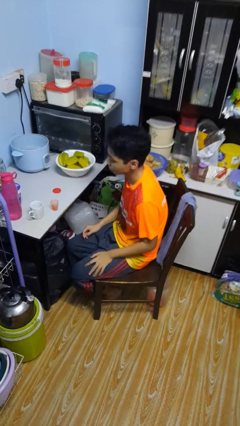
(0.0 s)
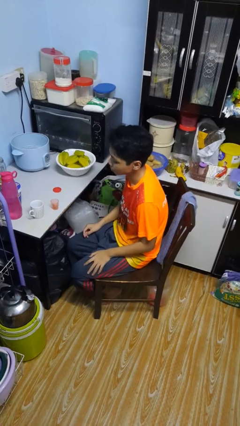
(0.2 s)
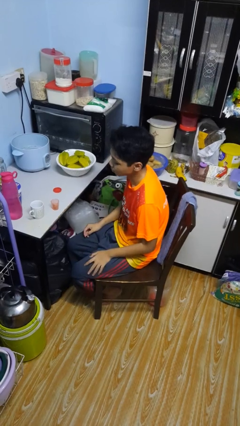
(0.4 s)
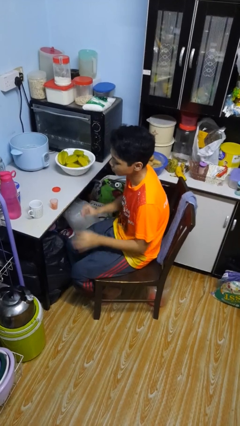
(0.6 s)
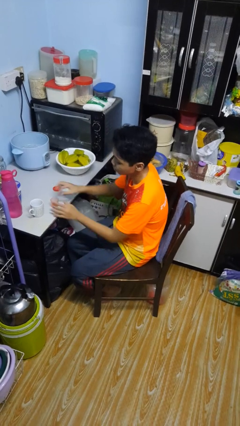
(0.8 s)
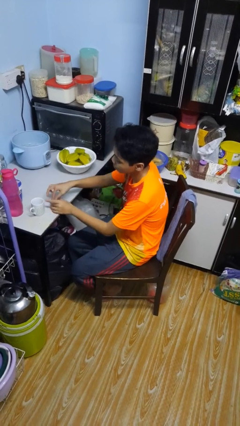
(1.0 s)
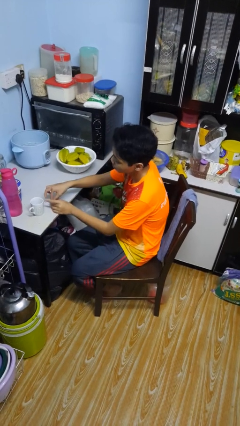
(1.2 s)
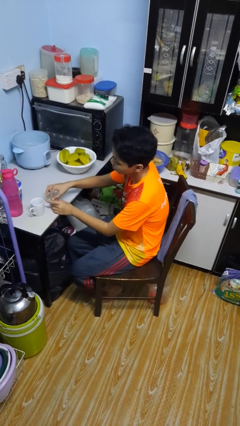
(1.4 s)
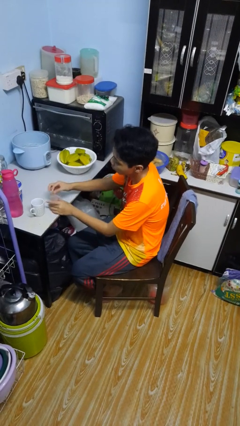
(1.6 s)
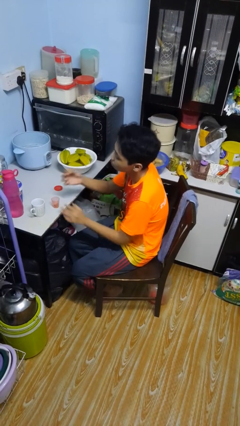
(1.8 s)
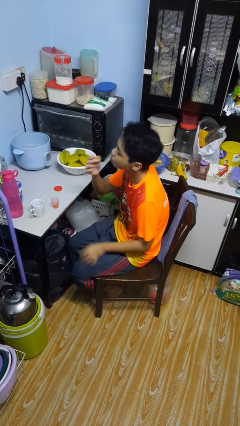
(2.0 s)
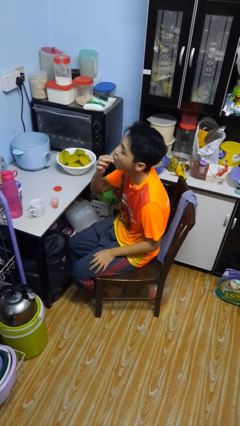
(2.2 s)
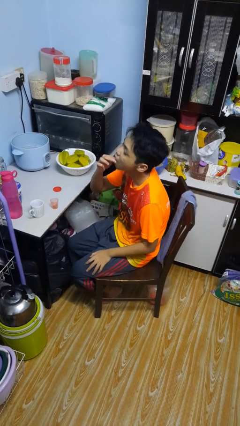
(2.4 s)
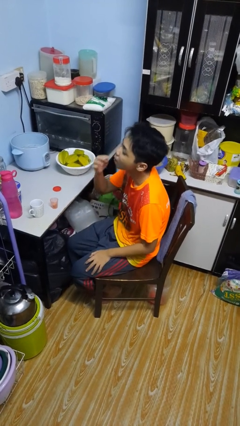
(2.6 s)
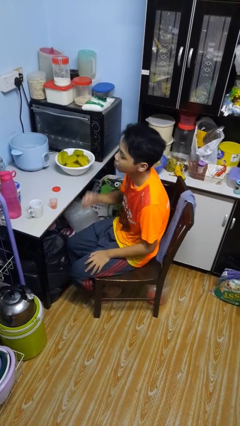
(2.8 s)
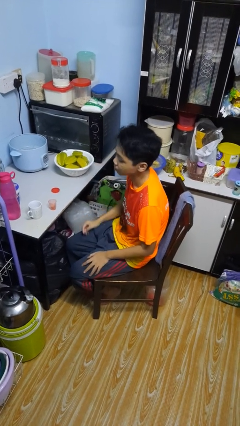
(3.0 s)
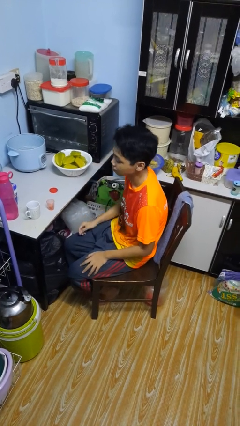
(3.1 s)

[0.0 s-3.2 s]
person takes medicine pills

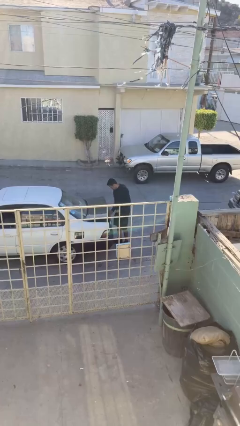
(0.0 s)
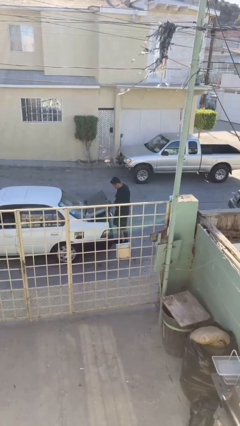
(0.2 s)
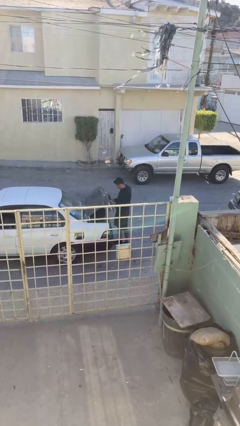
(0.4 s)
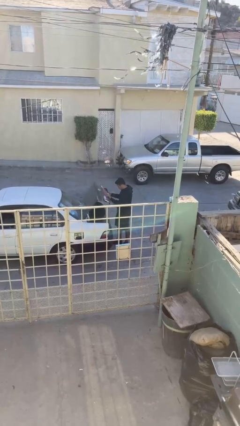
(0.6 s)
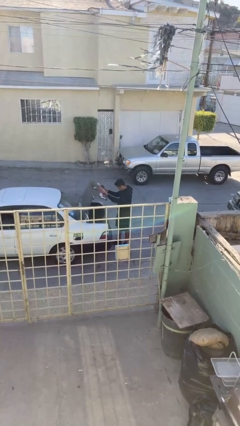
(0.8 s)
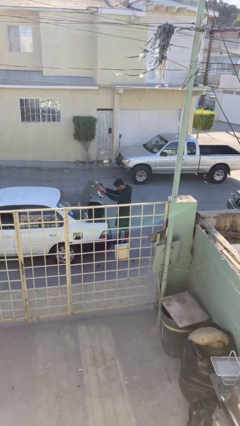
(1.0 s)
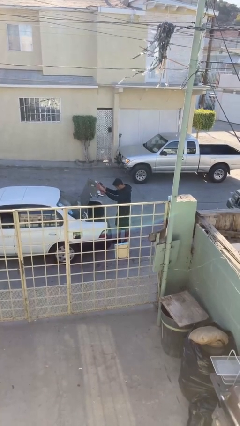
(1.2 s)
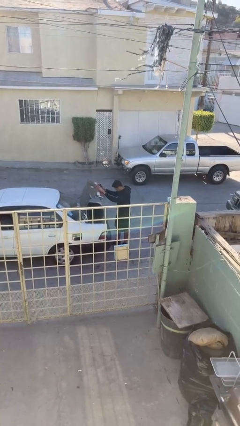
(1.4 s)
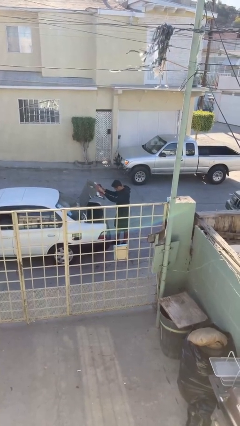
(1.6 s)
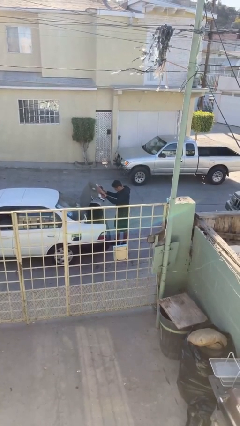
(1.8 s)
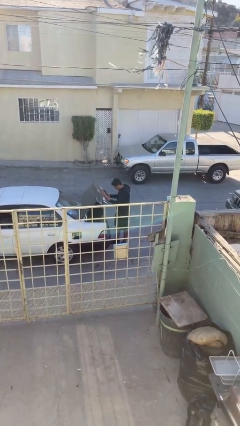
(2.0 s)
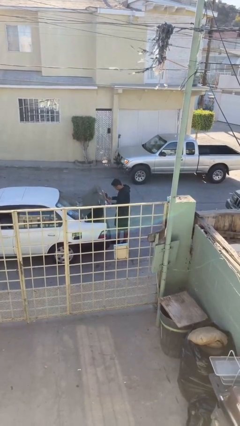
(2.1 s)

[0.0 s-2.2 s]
person opens car trunk

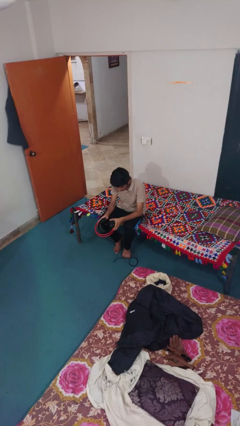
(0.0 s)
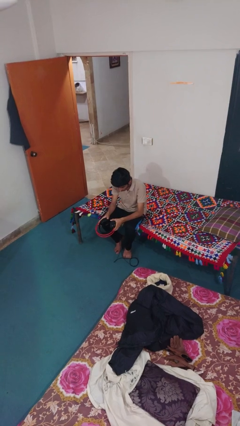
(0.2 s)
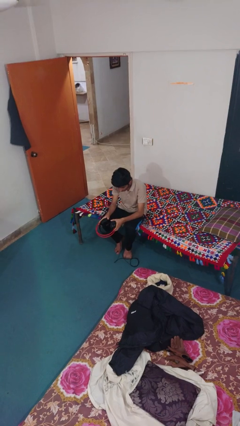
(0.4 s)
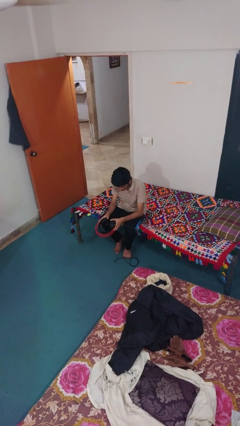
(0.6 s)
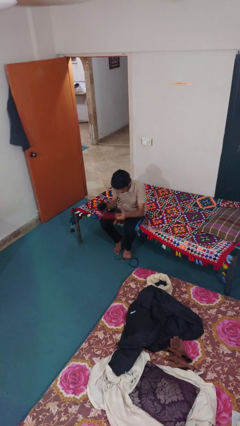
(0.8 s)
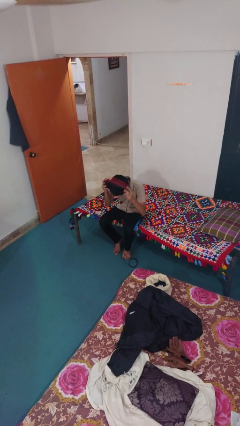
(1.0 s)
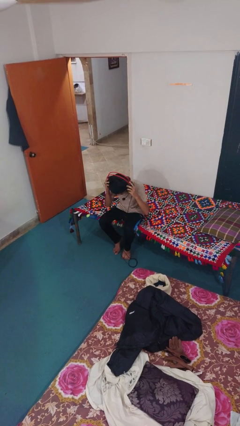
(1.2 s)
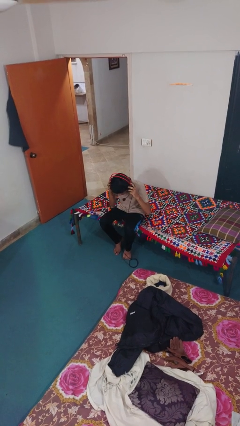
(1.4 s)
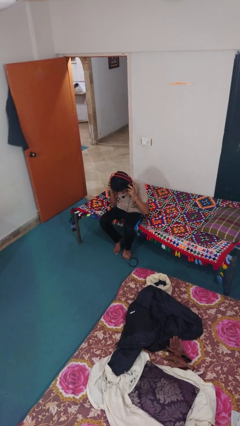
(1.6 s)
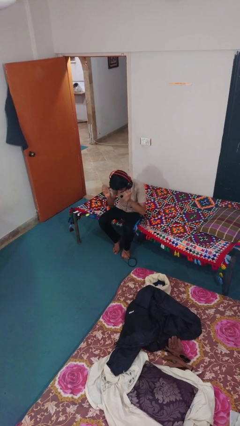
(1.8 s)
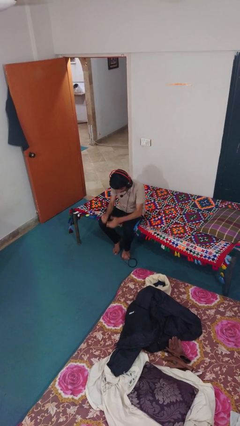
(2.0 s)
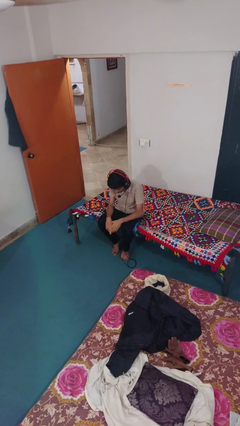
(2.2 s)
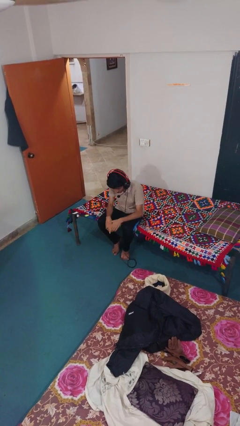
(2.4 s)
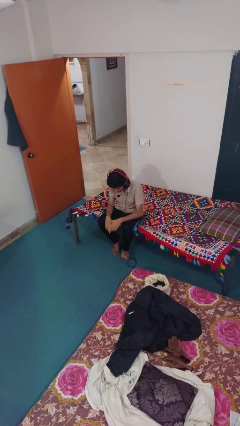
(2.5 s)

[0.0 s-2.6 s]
person puts on headphones

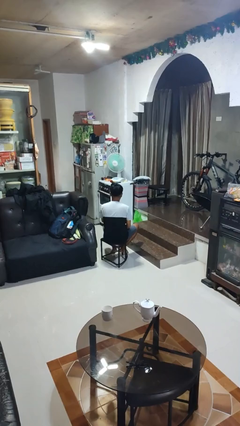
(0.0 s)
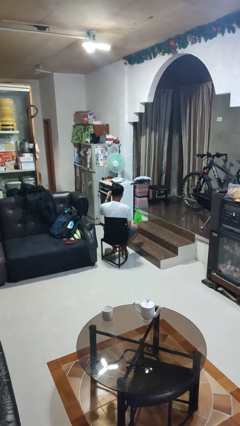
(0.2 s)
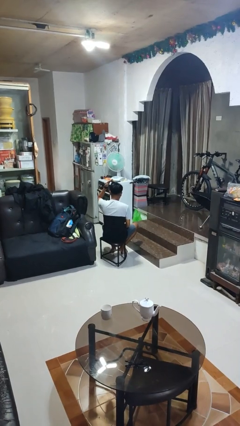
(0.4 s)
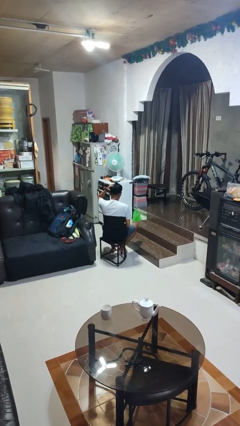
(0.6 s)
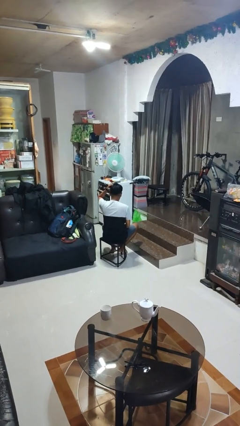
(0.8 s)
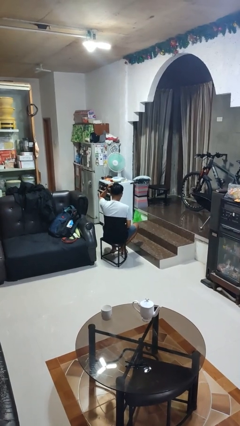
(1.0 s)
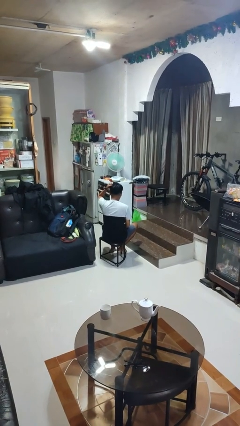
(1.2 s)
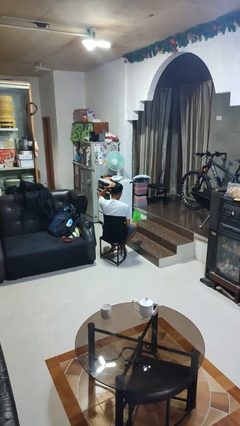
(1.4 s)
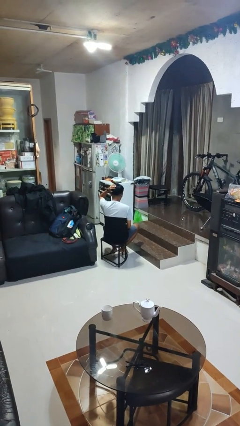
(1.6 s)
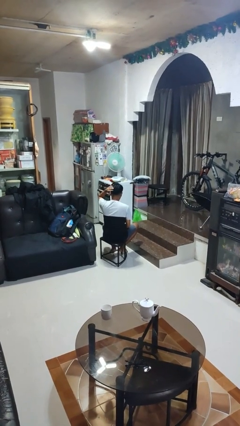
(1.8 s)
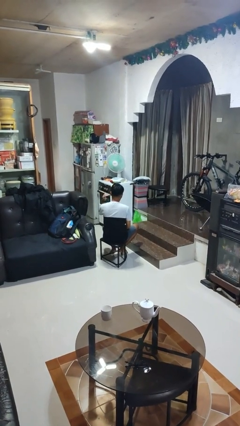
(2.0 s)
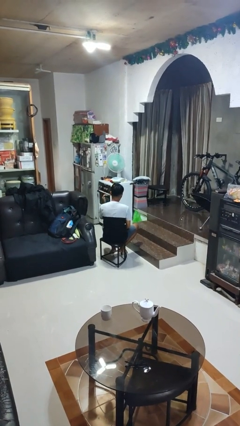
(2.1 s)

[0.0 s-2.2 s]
person pats head

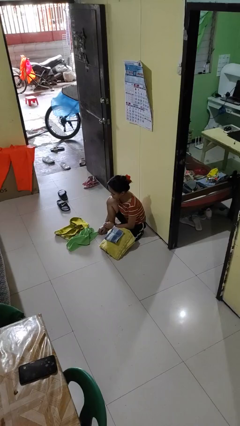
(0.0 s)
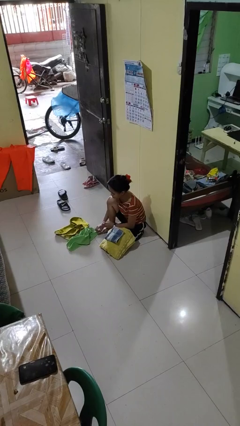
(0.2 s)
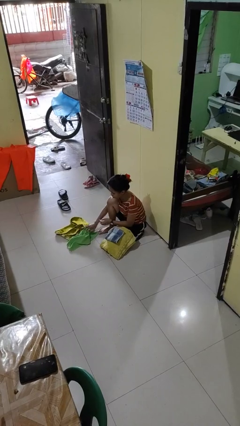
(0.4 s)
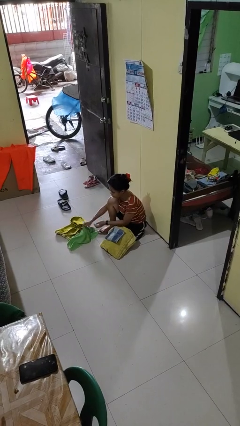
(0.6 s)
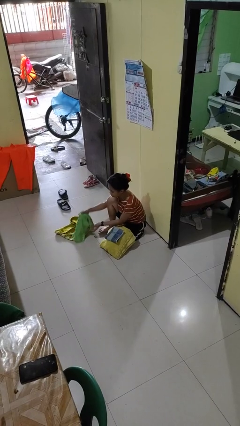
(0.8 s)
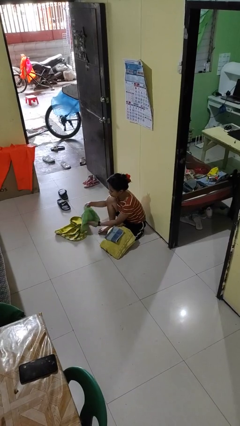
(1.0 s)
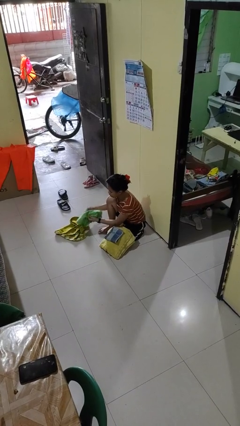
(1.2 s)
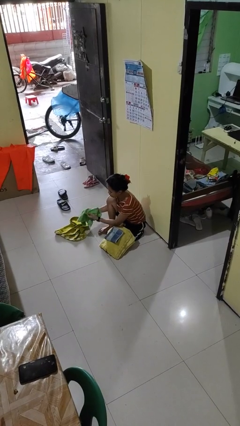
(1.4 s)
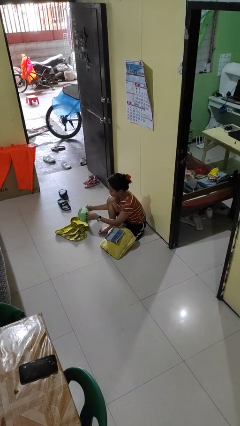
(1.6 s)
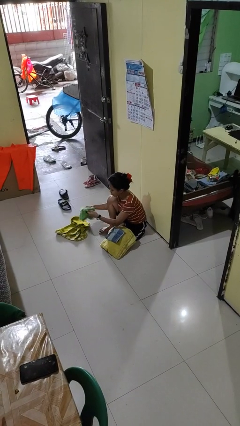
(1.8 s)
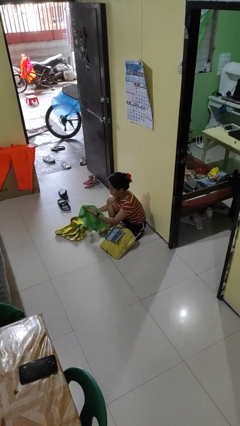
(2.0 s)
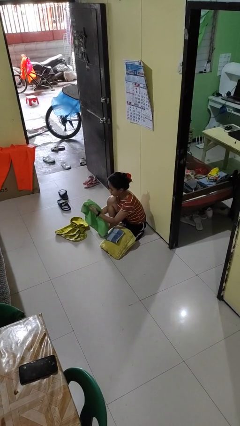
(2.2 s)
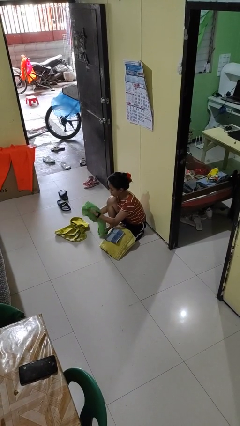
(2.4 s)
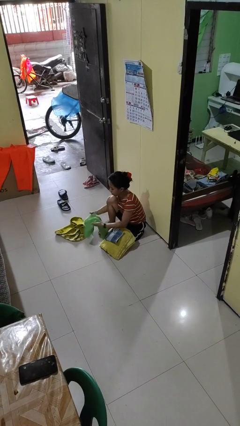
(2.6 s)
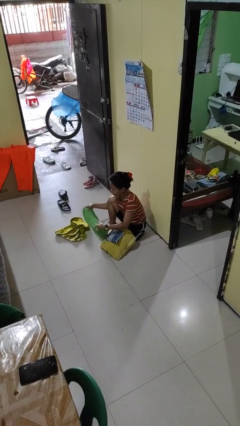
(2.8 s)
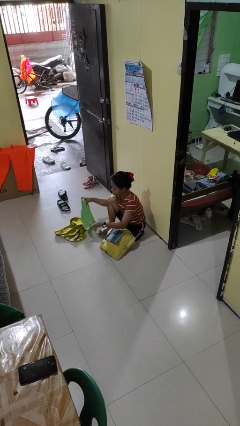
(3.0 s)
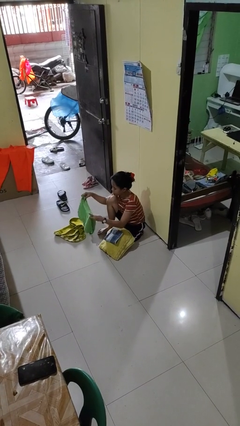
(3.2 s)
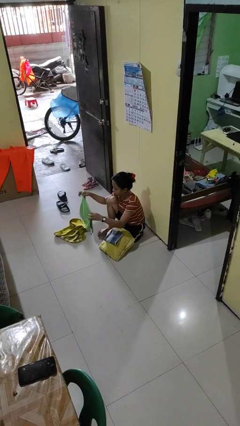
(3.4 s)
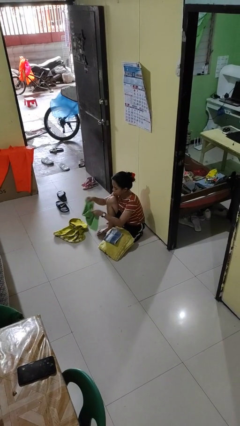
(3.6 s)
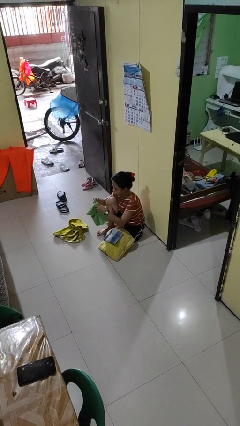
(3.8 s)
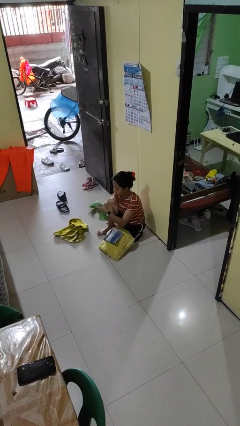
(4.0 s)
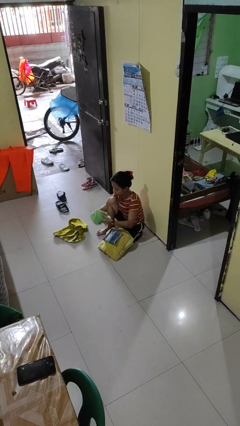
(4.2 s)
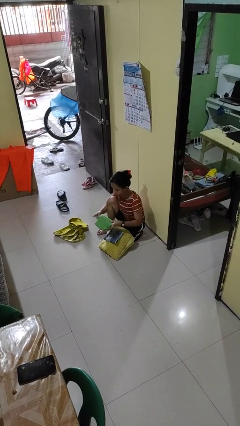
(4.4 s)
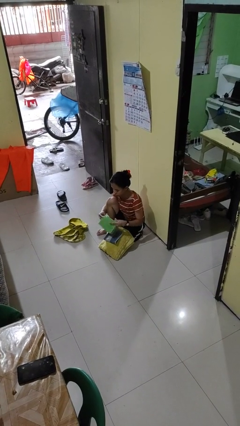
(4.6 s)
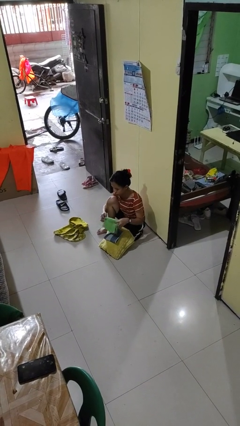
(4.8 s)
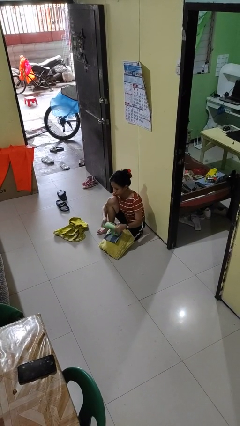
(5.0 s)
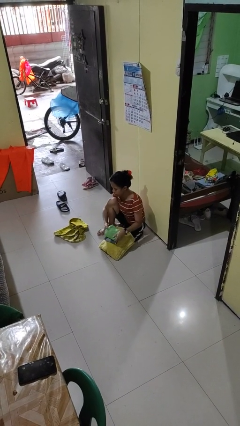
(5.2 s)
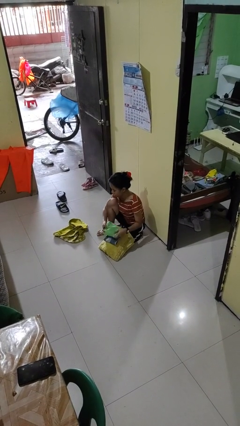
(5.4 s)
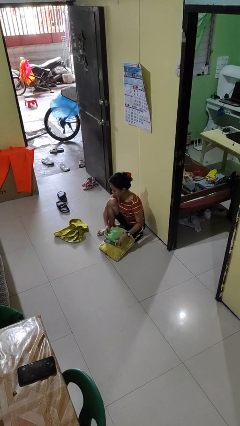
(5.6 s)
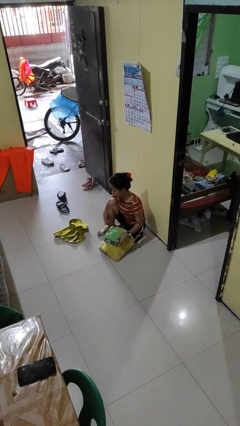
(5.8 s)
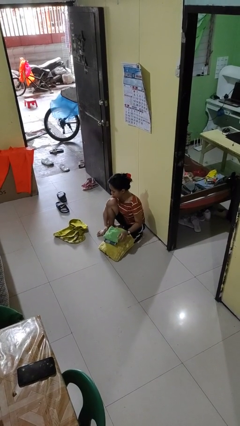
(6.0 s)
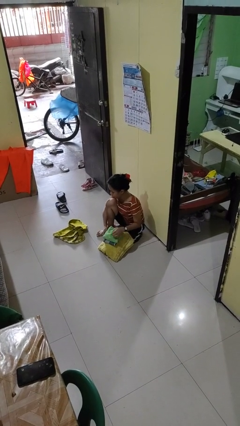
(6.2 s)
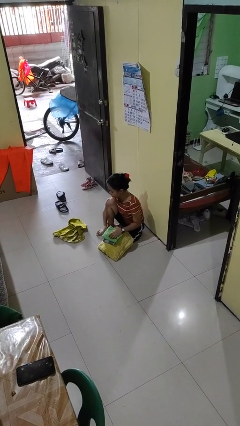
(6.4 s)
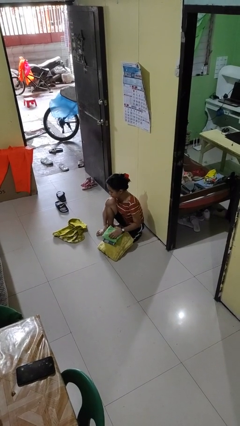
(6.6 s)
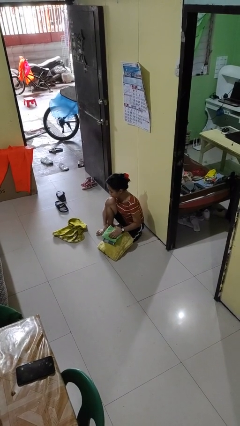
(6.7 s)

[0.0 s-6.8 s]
person folds towel

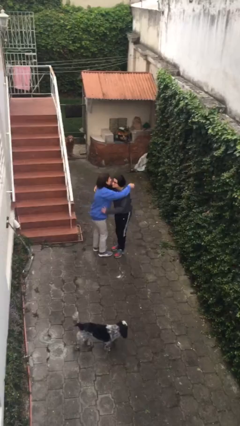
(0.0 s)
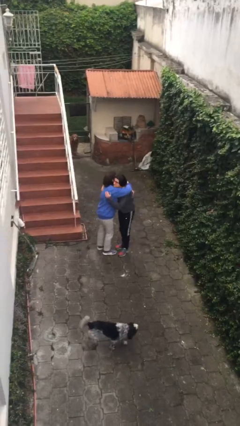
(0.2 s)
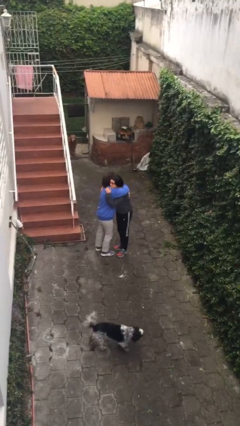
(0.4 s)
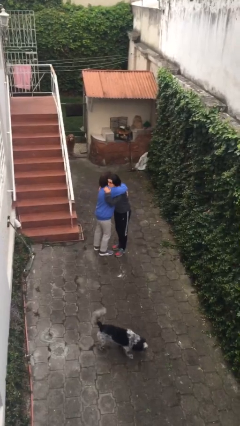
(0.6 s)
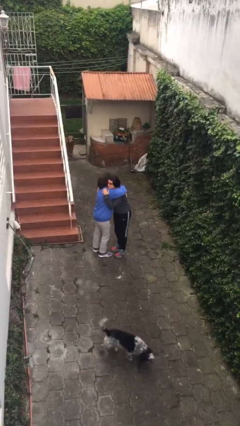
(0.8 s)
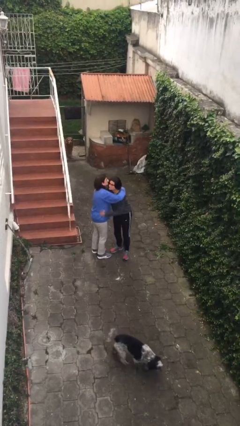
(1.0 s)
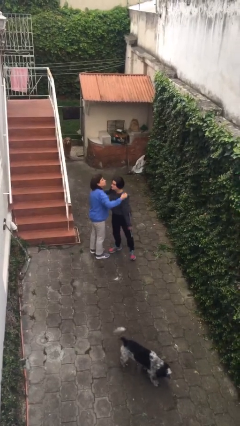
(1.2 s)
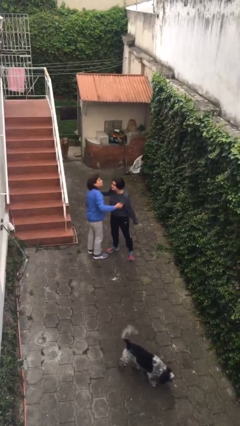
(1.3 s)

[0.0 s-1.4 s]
person embraces person
